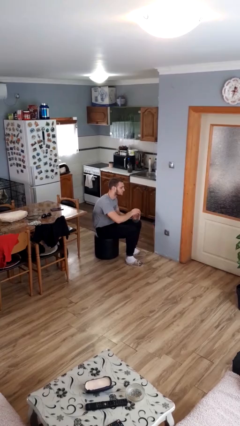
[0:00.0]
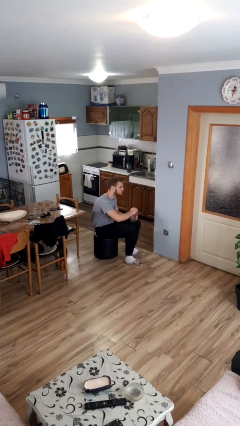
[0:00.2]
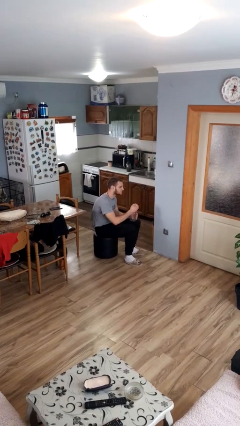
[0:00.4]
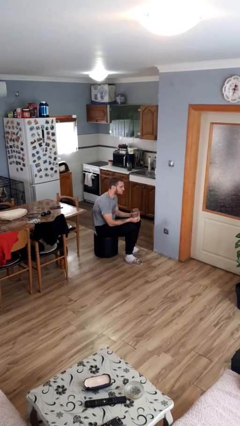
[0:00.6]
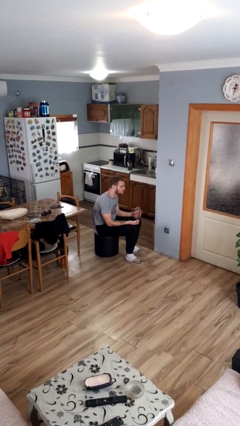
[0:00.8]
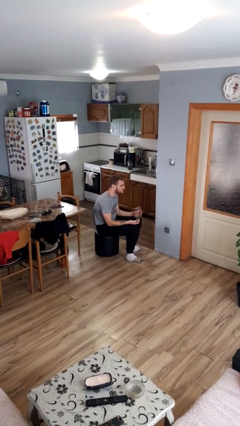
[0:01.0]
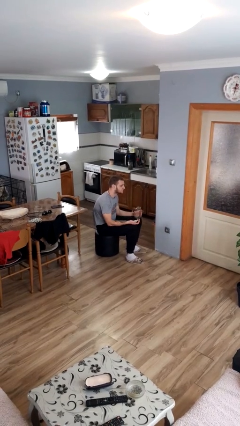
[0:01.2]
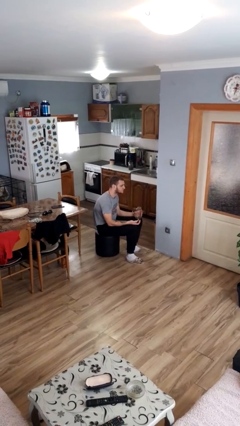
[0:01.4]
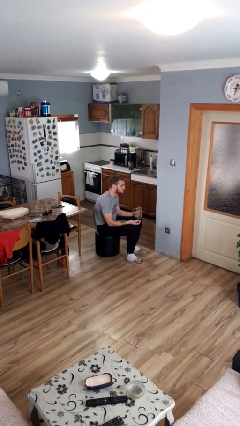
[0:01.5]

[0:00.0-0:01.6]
person opens jar

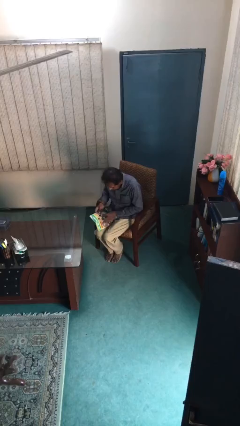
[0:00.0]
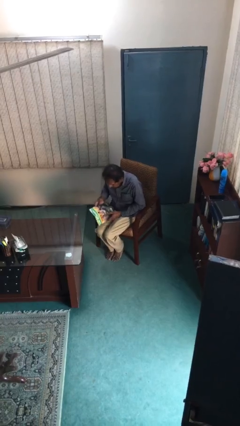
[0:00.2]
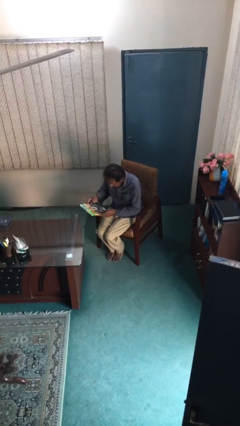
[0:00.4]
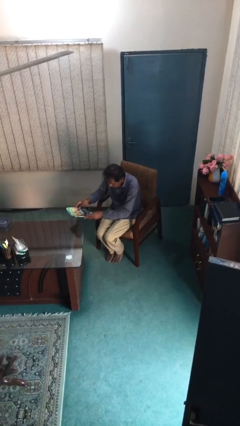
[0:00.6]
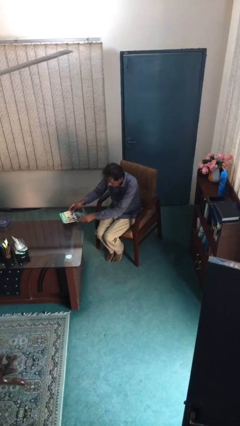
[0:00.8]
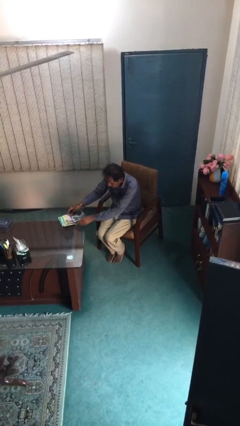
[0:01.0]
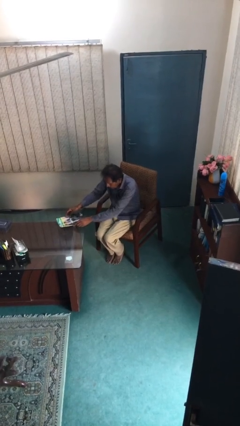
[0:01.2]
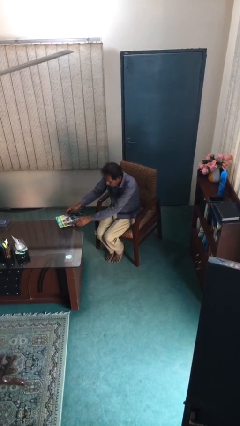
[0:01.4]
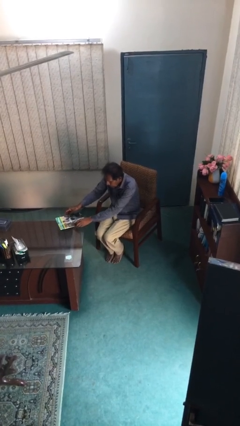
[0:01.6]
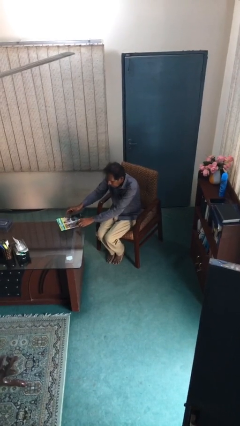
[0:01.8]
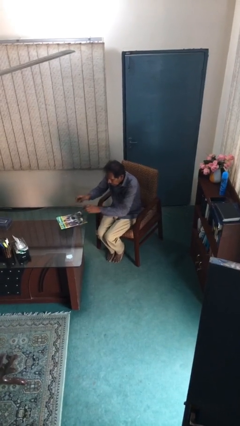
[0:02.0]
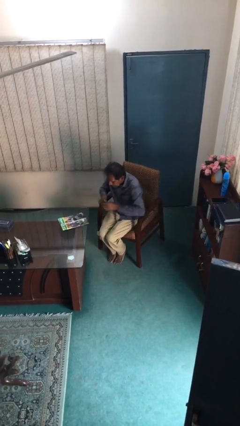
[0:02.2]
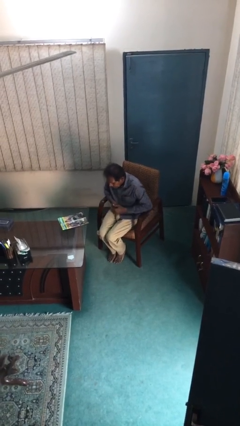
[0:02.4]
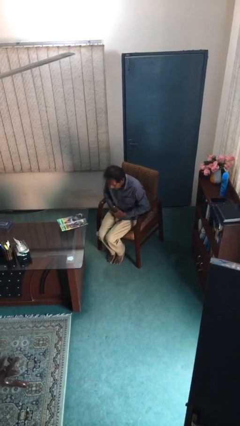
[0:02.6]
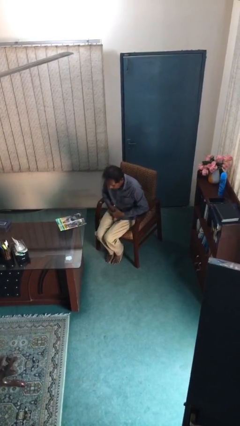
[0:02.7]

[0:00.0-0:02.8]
person puts down object on table

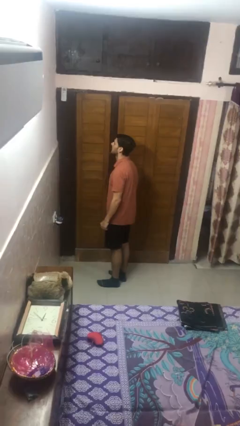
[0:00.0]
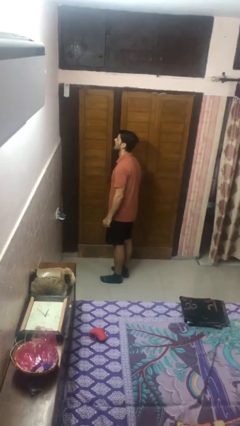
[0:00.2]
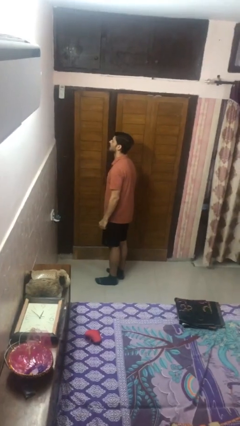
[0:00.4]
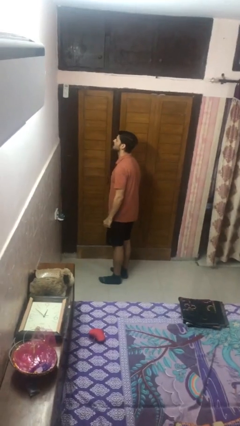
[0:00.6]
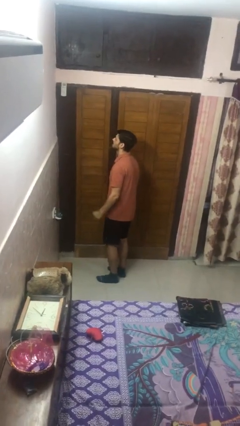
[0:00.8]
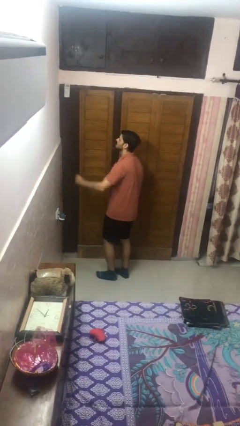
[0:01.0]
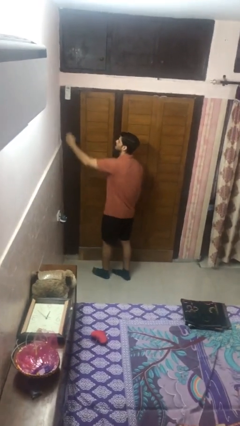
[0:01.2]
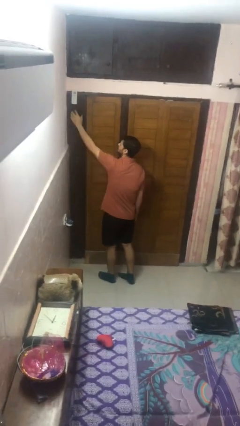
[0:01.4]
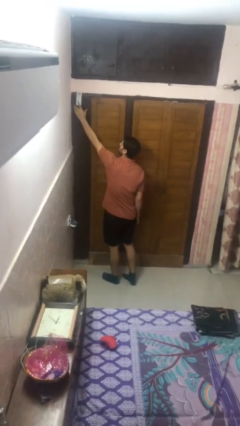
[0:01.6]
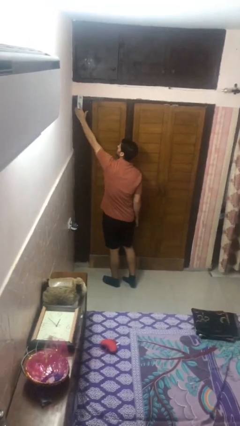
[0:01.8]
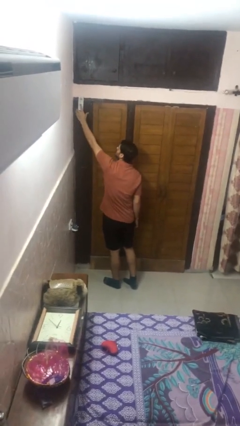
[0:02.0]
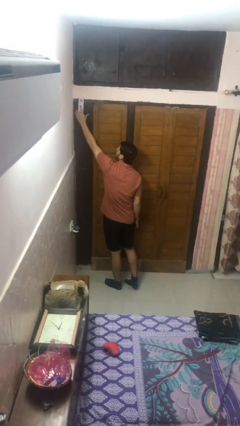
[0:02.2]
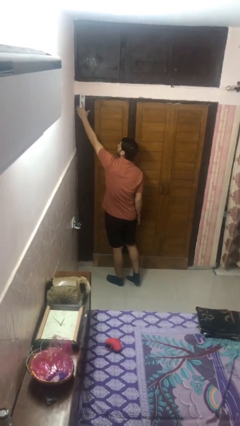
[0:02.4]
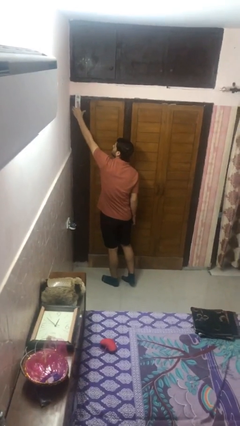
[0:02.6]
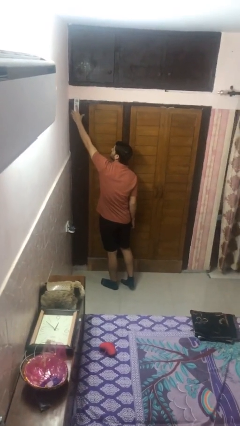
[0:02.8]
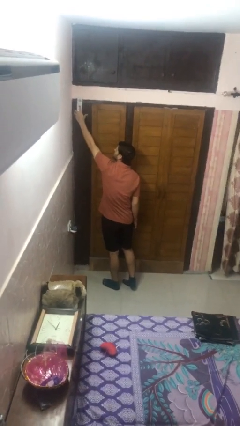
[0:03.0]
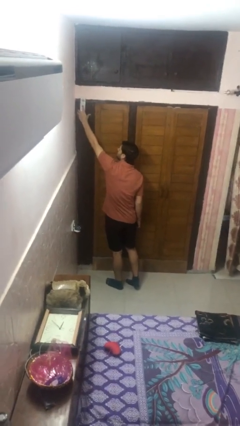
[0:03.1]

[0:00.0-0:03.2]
person adjusts thermostat

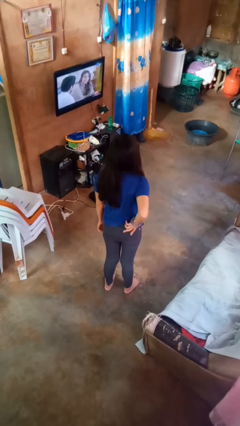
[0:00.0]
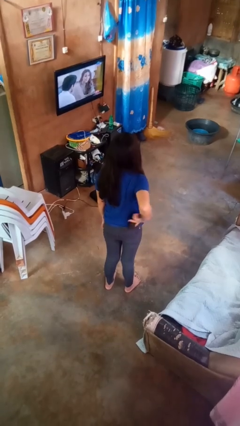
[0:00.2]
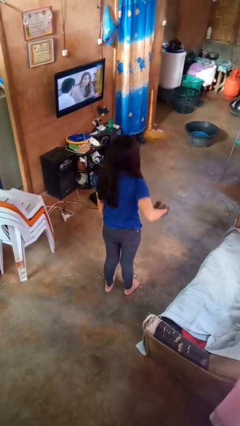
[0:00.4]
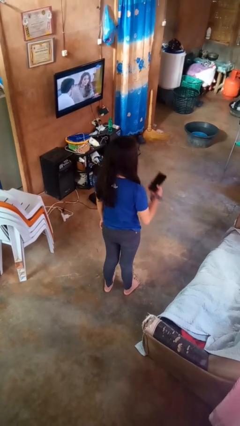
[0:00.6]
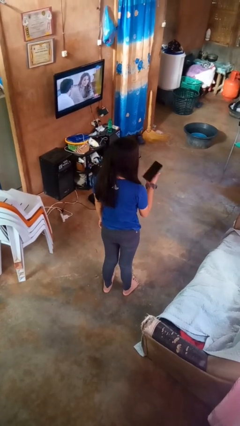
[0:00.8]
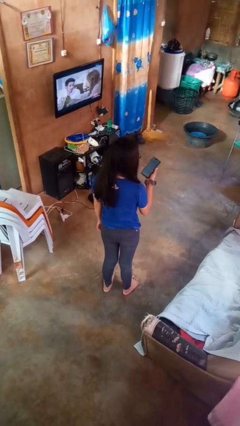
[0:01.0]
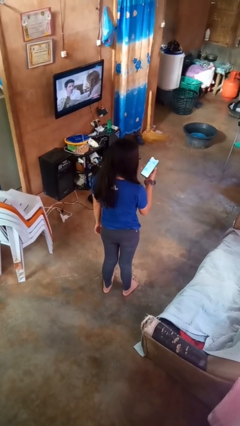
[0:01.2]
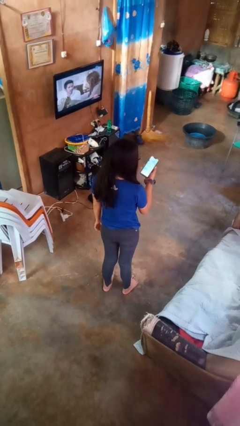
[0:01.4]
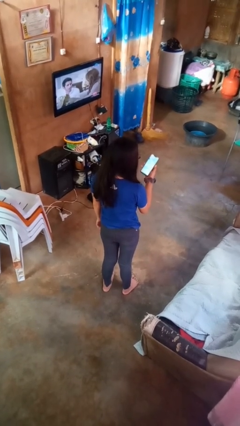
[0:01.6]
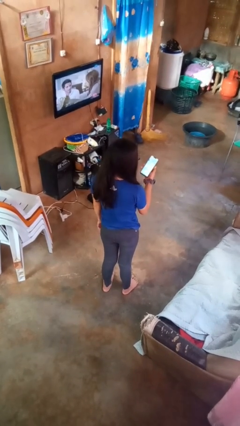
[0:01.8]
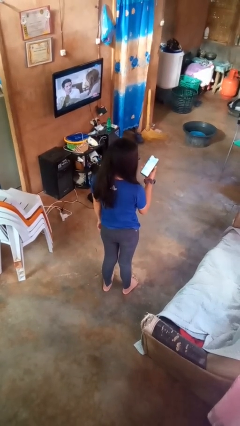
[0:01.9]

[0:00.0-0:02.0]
person takes phone from pocket

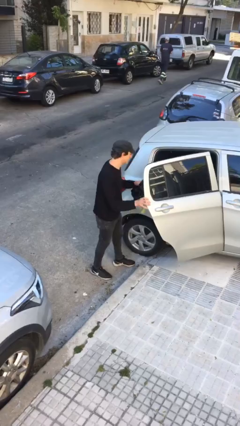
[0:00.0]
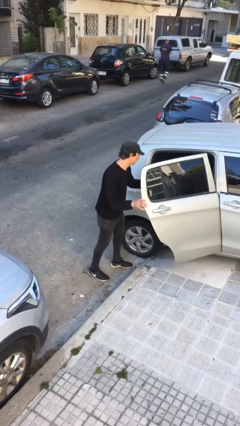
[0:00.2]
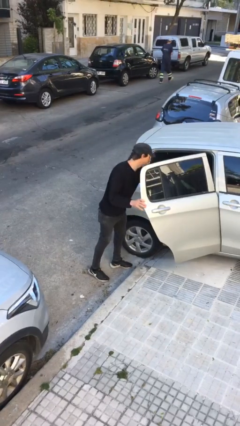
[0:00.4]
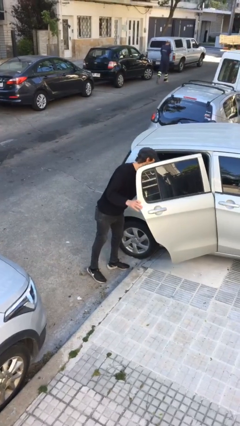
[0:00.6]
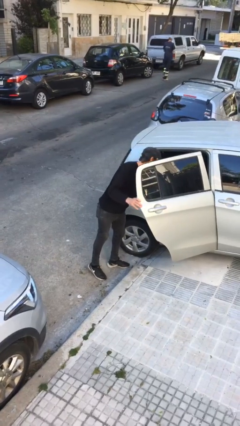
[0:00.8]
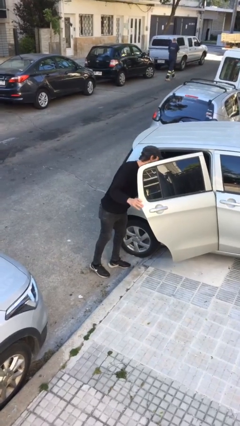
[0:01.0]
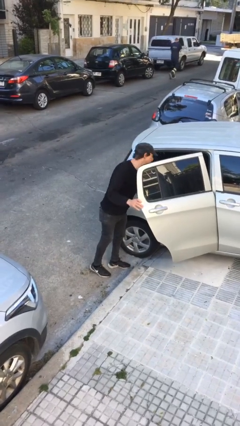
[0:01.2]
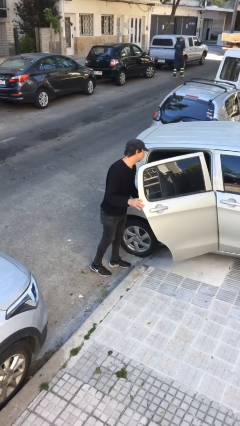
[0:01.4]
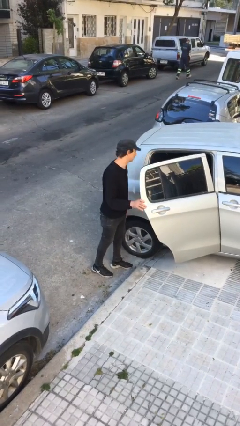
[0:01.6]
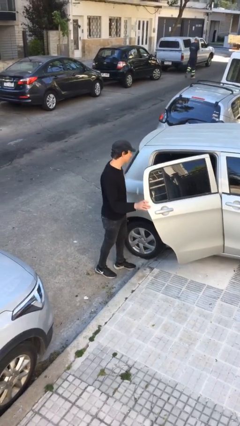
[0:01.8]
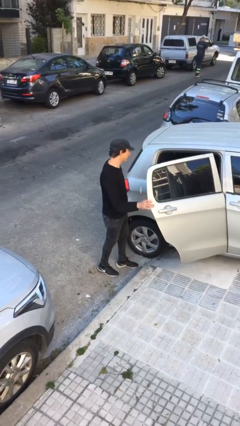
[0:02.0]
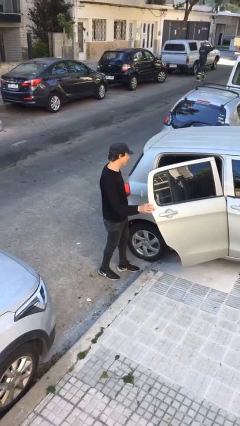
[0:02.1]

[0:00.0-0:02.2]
person loads car

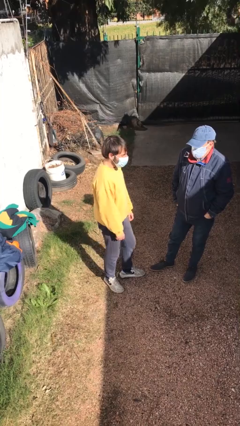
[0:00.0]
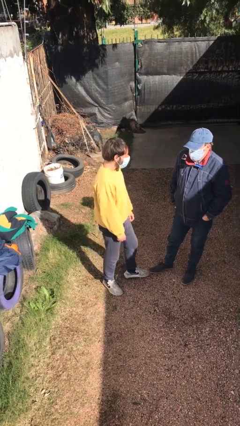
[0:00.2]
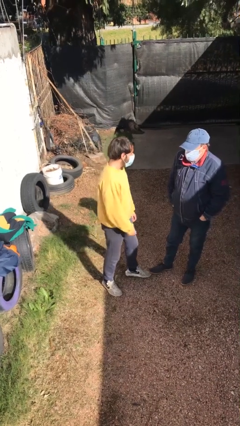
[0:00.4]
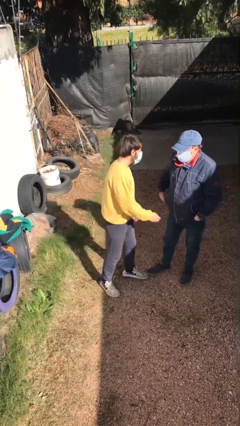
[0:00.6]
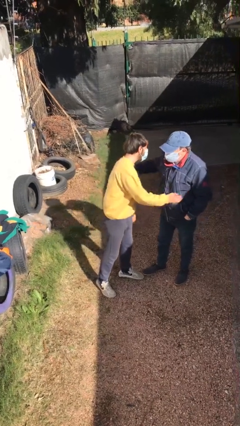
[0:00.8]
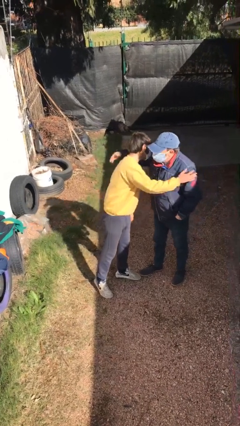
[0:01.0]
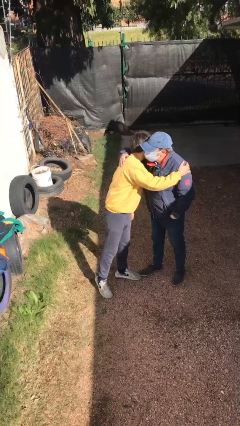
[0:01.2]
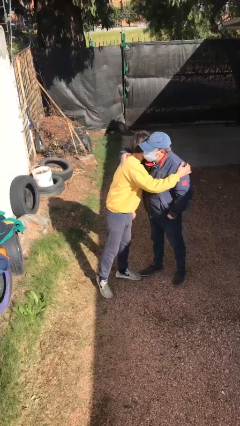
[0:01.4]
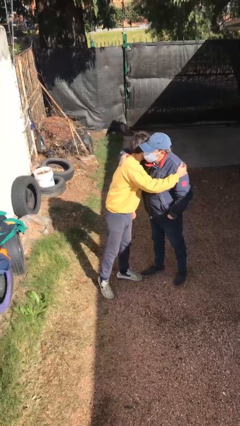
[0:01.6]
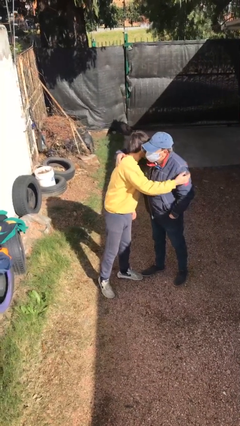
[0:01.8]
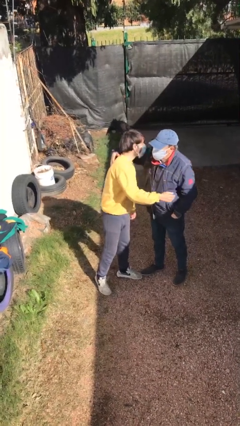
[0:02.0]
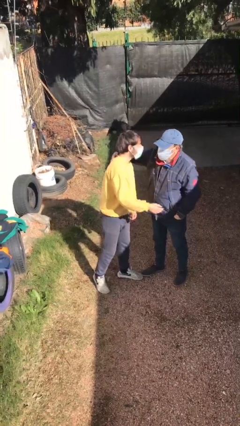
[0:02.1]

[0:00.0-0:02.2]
person kisses cheek of person

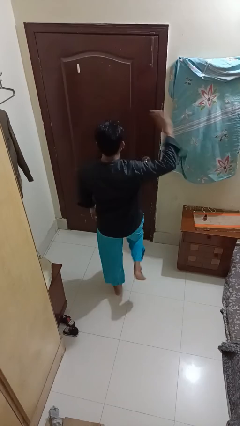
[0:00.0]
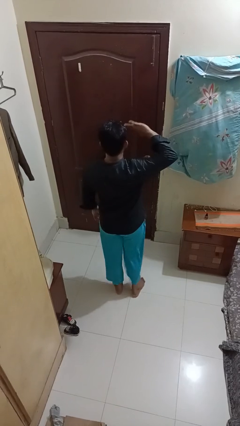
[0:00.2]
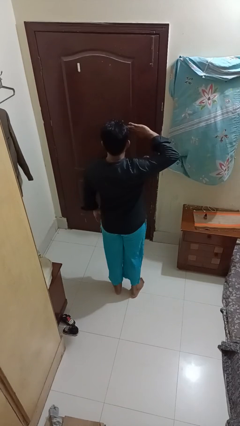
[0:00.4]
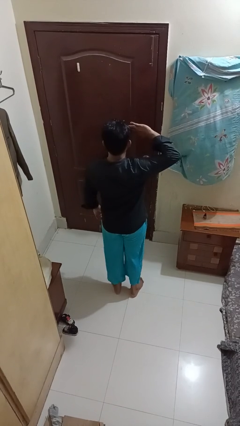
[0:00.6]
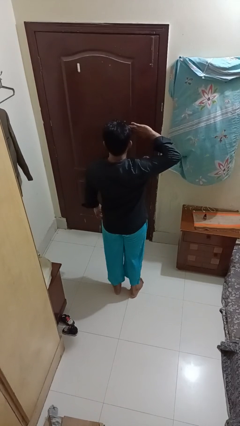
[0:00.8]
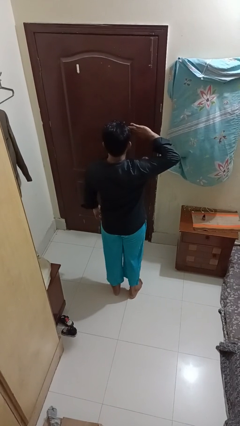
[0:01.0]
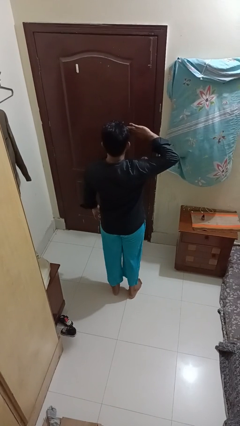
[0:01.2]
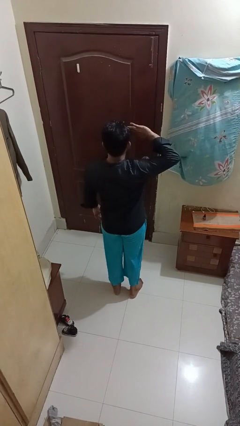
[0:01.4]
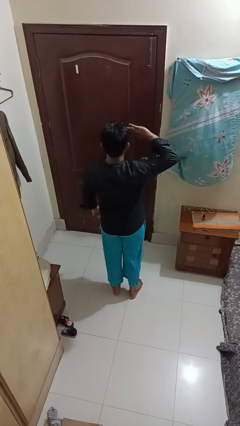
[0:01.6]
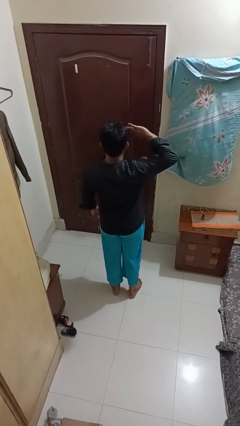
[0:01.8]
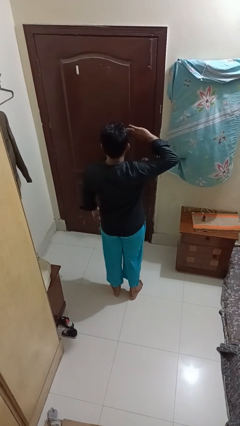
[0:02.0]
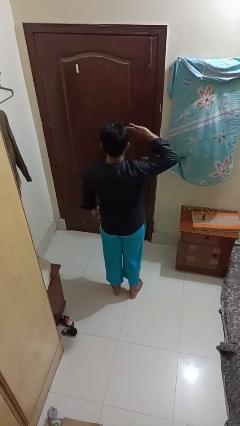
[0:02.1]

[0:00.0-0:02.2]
person salutes

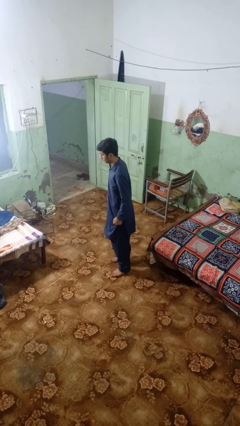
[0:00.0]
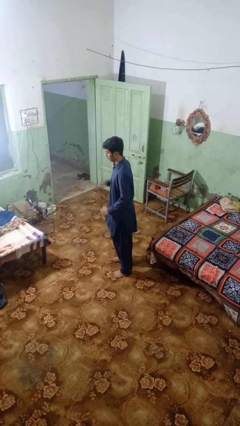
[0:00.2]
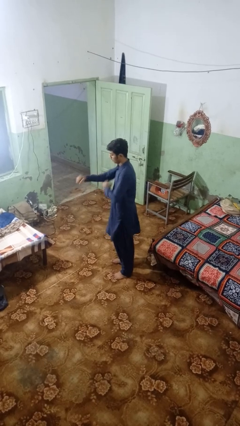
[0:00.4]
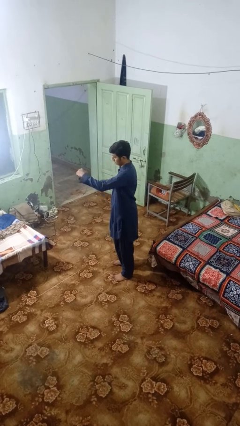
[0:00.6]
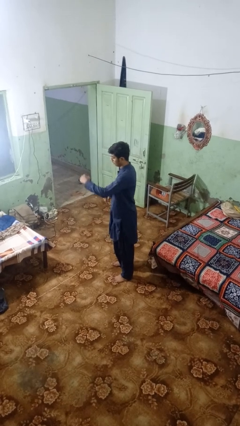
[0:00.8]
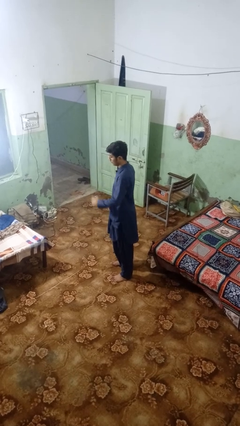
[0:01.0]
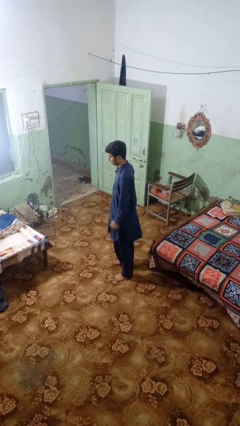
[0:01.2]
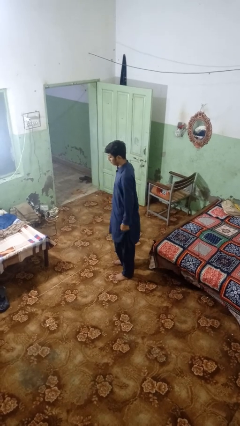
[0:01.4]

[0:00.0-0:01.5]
person karate chop
